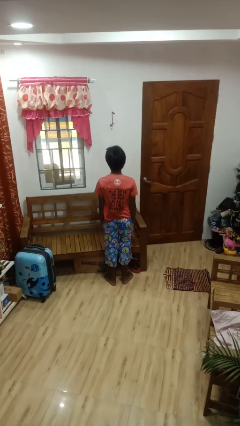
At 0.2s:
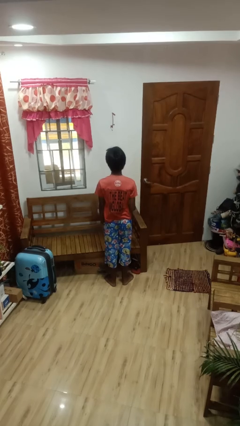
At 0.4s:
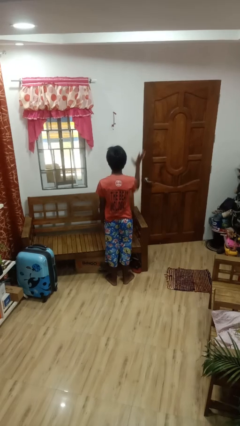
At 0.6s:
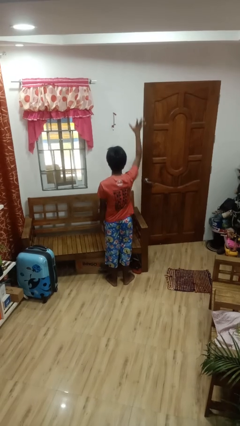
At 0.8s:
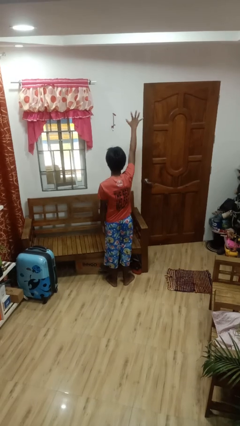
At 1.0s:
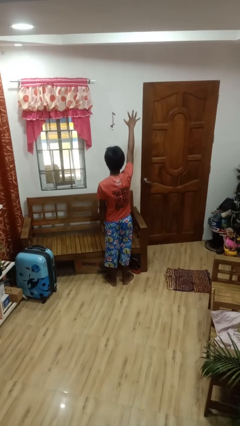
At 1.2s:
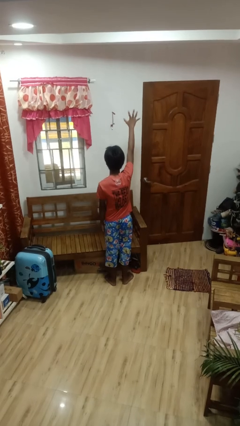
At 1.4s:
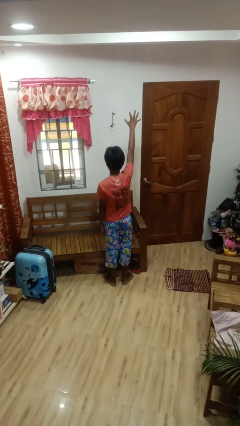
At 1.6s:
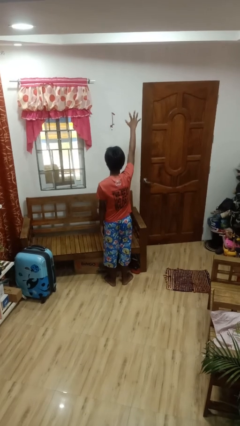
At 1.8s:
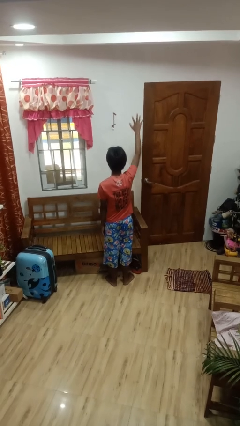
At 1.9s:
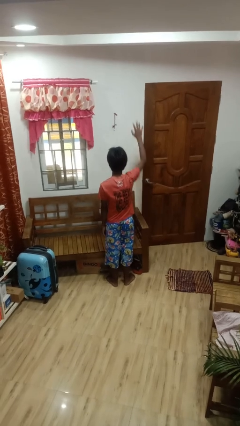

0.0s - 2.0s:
person gestures number five

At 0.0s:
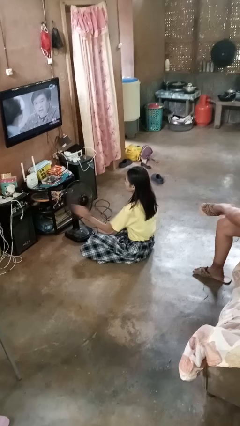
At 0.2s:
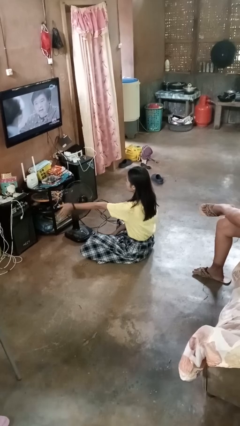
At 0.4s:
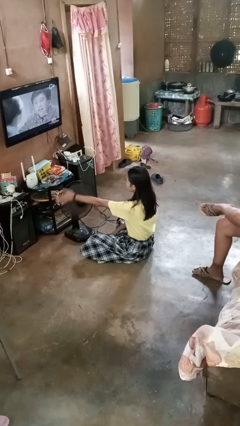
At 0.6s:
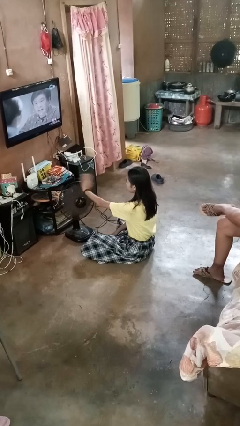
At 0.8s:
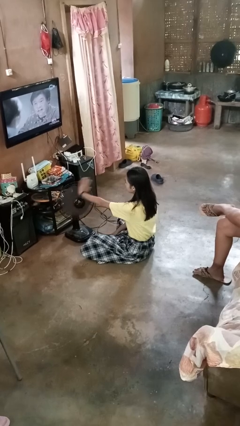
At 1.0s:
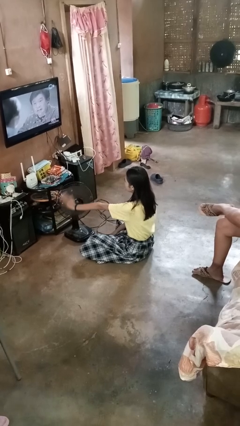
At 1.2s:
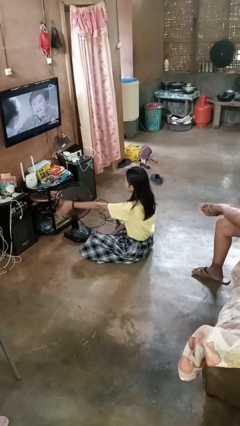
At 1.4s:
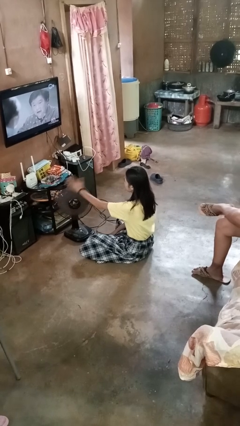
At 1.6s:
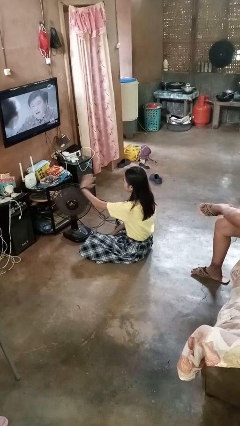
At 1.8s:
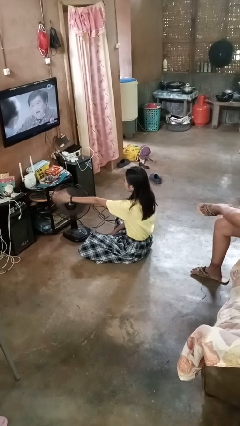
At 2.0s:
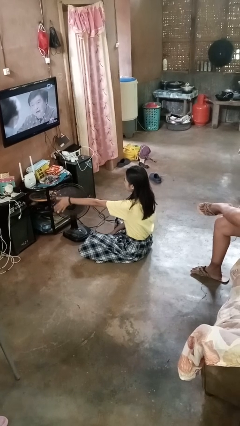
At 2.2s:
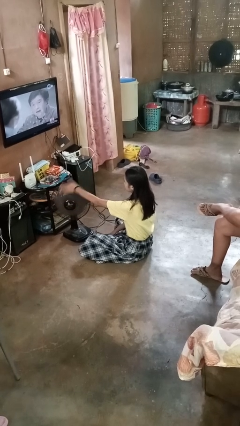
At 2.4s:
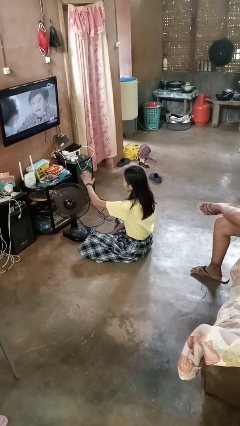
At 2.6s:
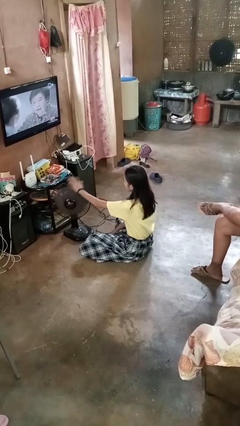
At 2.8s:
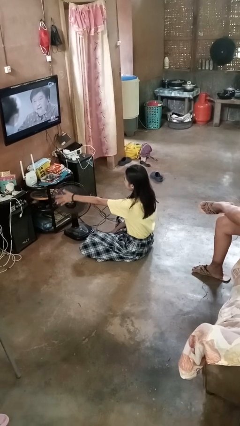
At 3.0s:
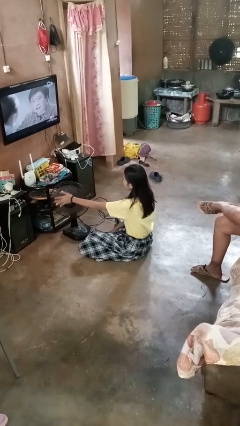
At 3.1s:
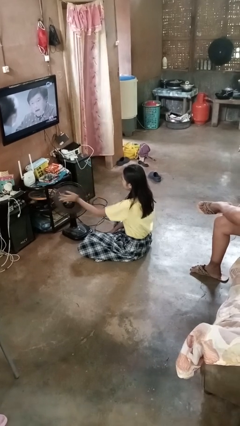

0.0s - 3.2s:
person waves hand over object

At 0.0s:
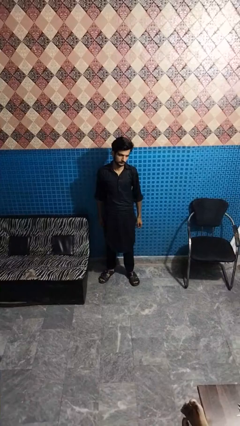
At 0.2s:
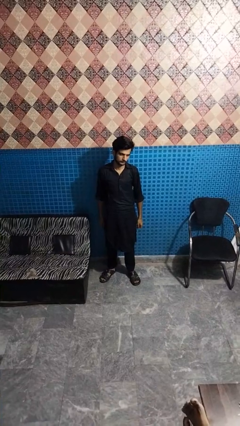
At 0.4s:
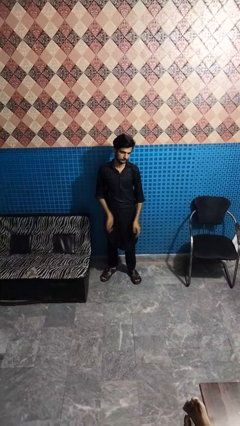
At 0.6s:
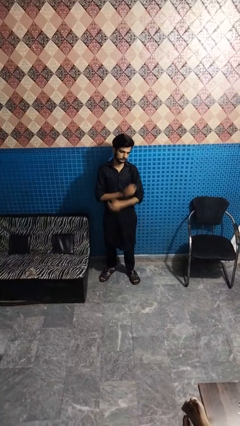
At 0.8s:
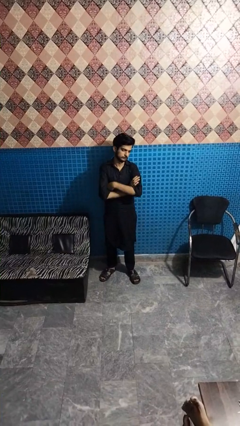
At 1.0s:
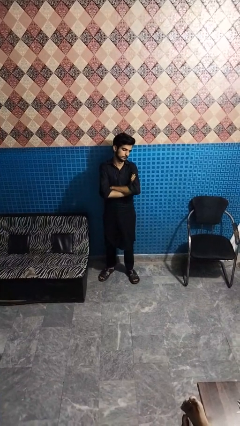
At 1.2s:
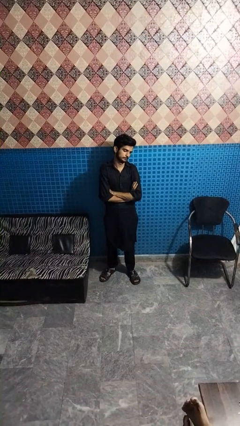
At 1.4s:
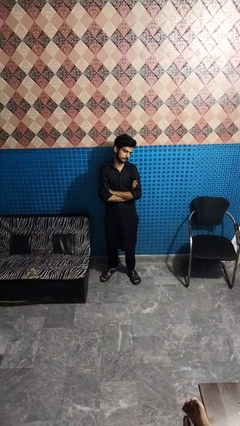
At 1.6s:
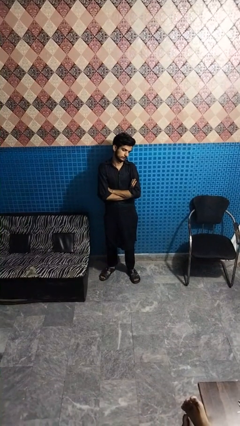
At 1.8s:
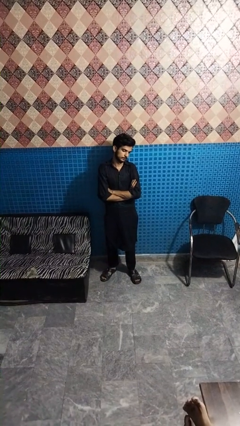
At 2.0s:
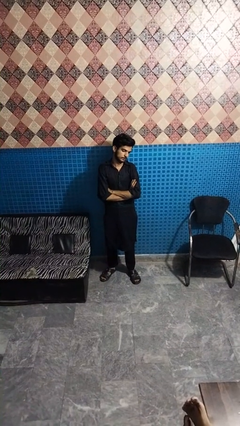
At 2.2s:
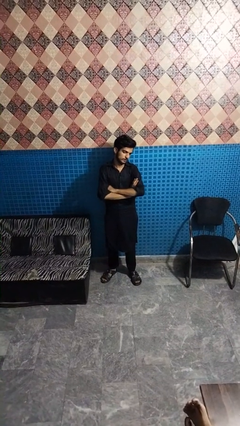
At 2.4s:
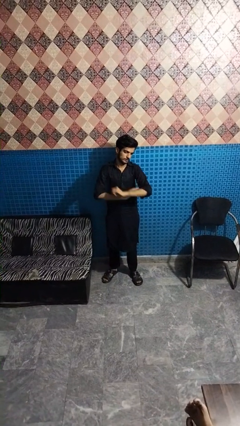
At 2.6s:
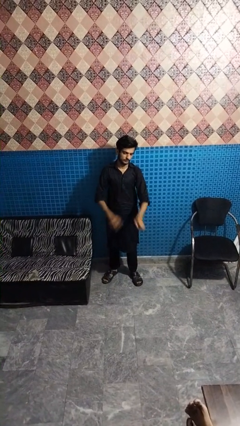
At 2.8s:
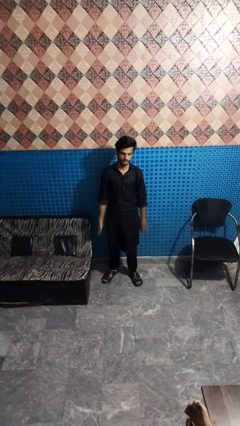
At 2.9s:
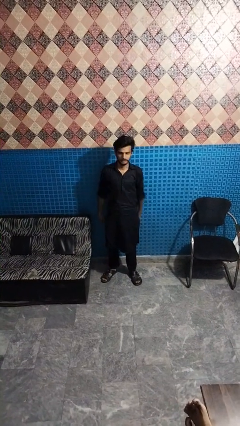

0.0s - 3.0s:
person crosses arms

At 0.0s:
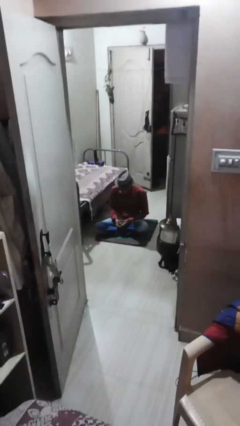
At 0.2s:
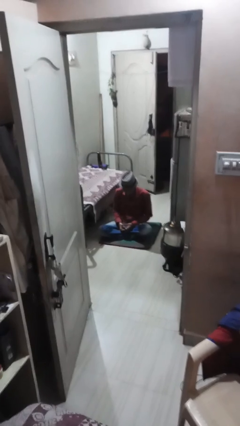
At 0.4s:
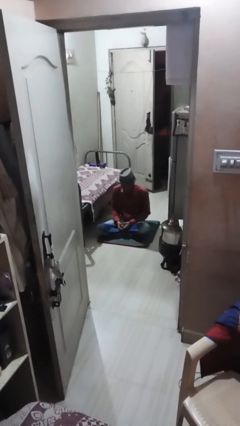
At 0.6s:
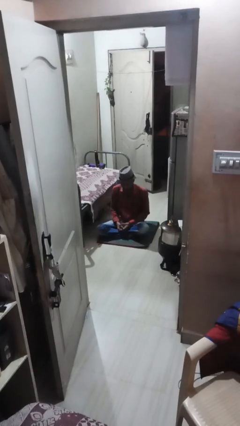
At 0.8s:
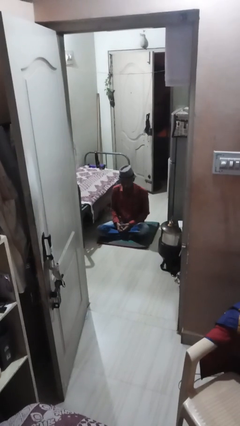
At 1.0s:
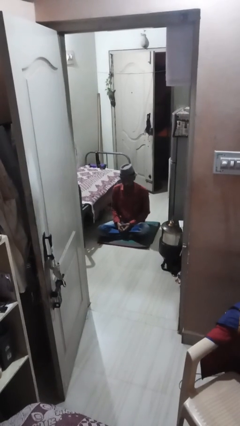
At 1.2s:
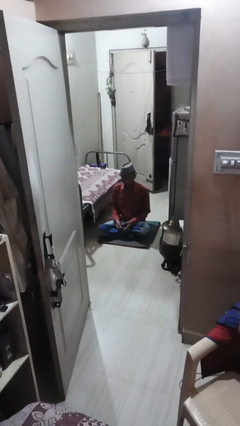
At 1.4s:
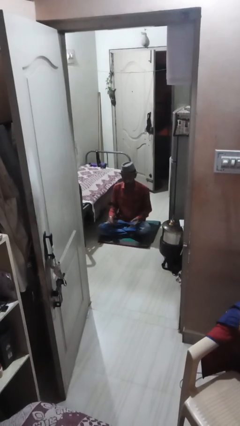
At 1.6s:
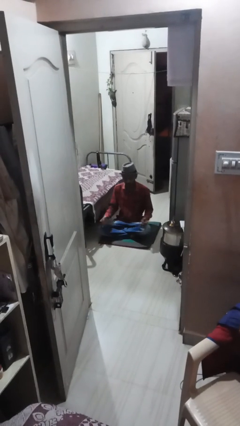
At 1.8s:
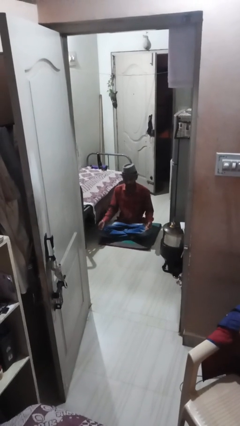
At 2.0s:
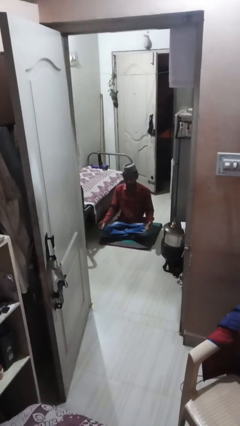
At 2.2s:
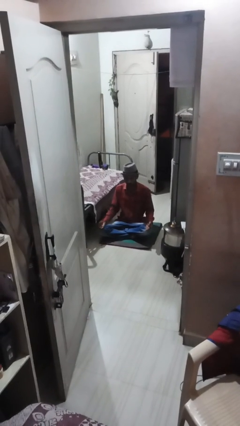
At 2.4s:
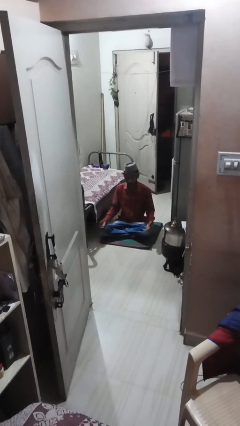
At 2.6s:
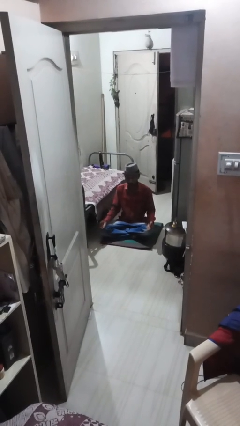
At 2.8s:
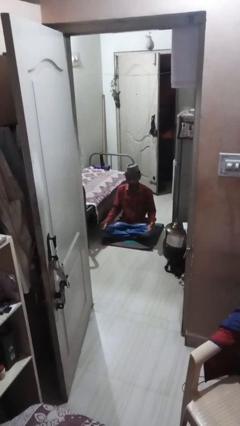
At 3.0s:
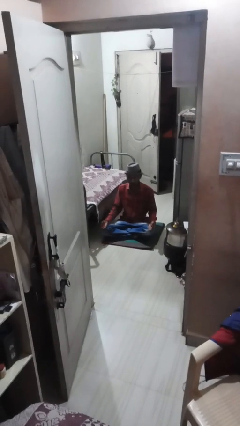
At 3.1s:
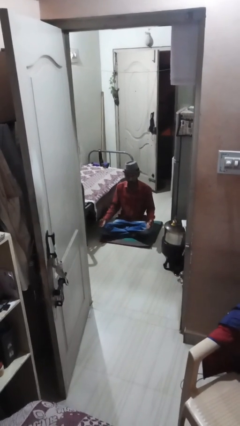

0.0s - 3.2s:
person prays

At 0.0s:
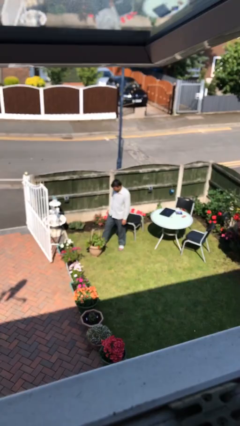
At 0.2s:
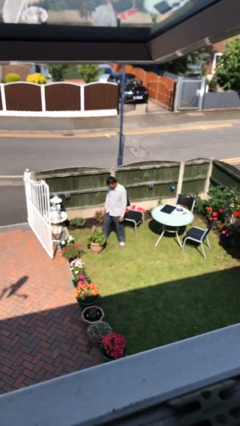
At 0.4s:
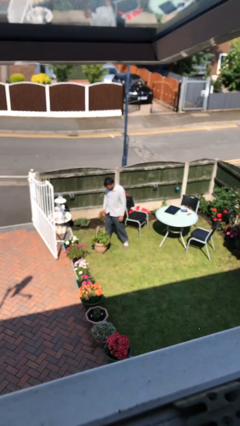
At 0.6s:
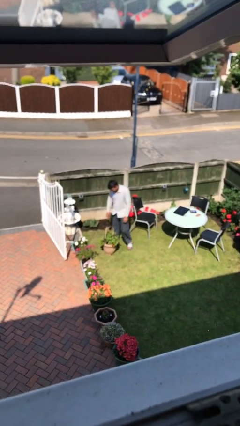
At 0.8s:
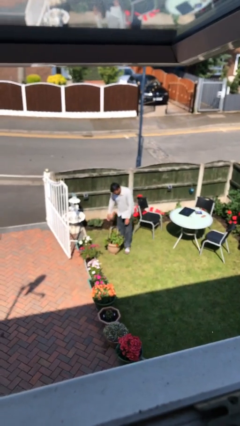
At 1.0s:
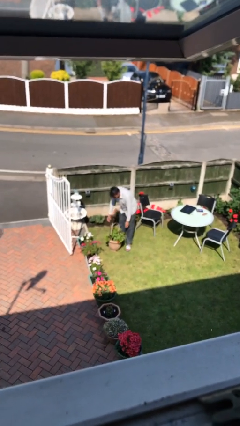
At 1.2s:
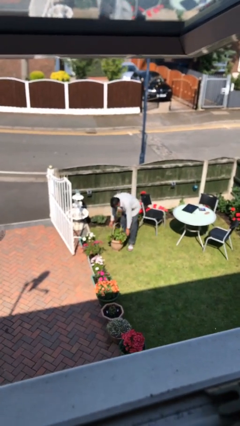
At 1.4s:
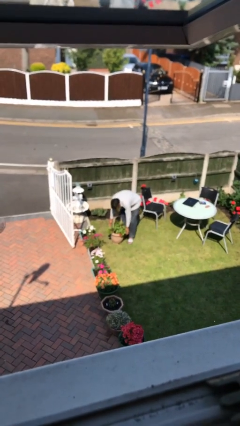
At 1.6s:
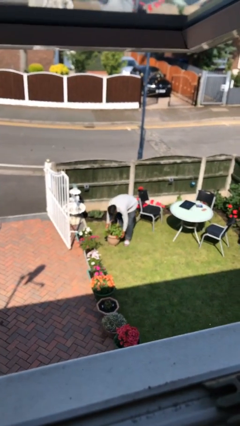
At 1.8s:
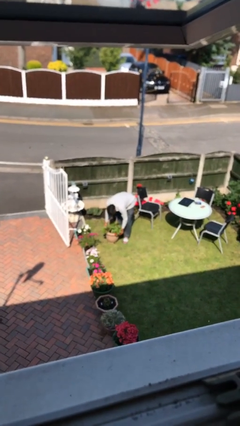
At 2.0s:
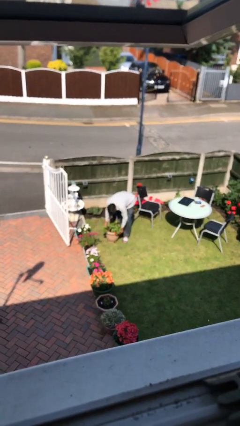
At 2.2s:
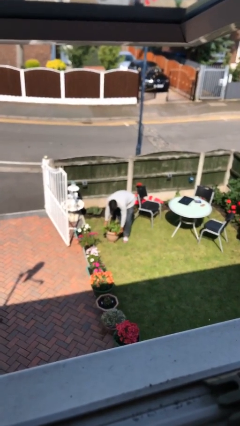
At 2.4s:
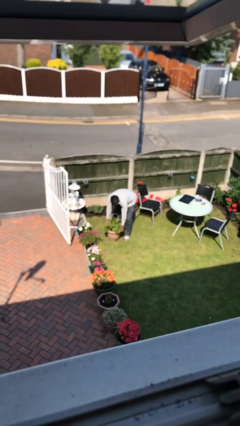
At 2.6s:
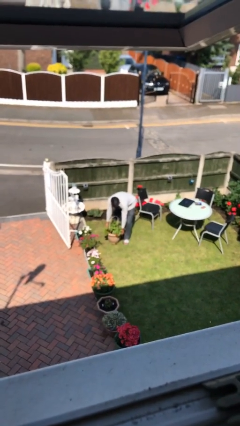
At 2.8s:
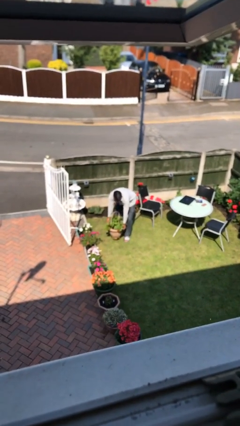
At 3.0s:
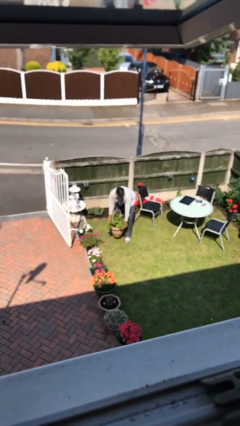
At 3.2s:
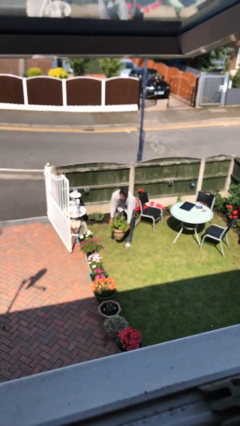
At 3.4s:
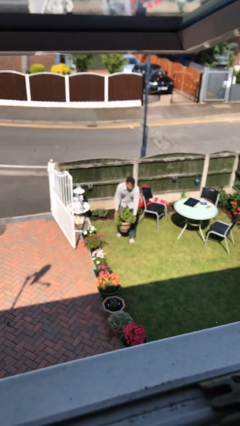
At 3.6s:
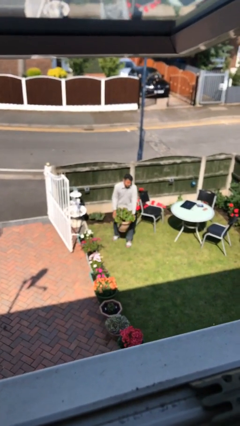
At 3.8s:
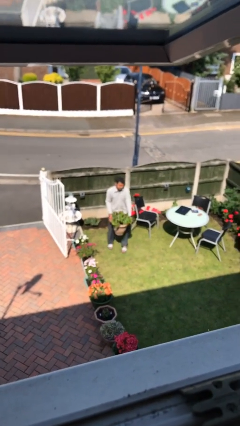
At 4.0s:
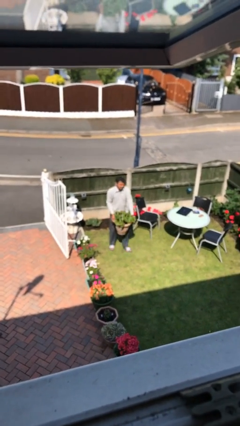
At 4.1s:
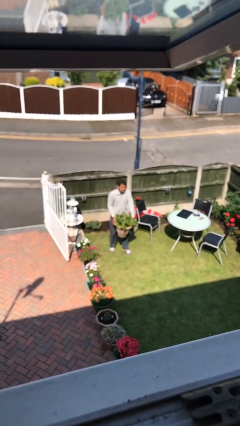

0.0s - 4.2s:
person picks up object from floor

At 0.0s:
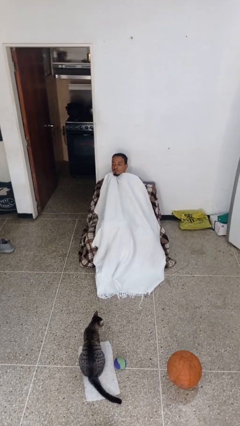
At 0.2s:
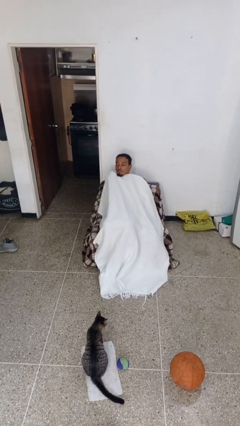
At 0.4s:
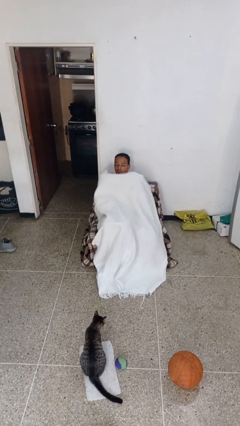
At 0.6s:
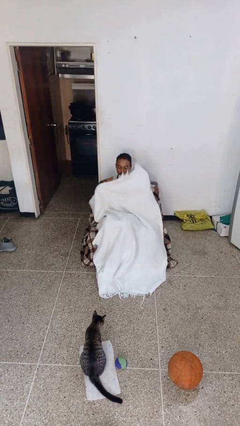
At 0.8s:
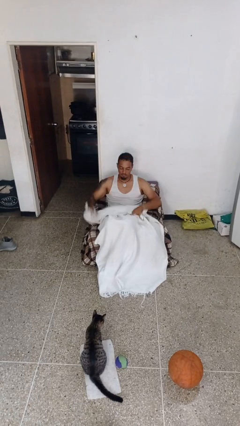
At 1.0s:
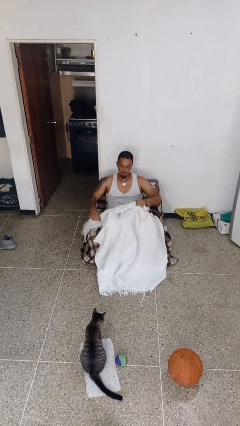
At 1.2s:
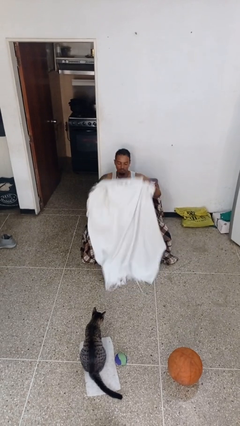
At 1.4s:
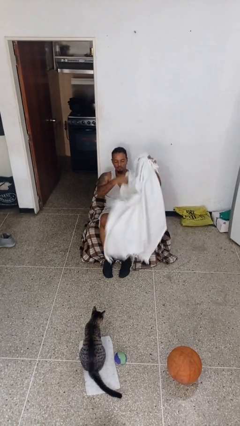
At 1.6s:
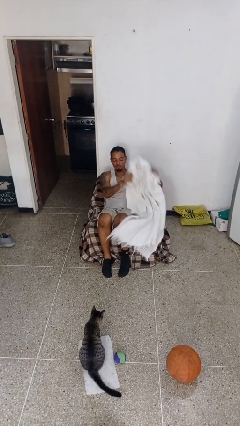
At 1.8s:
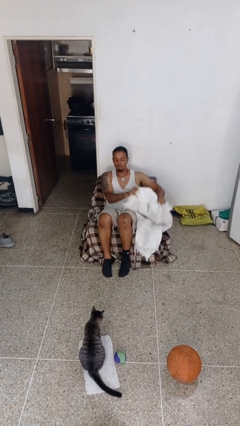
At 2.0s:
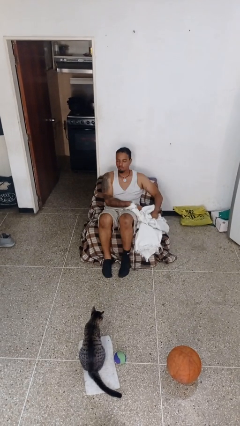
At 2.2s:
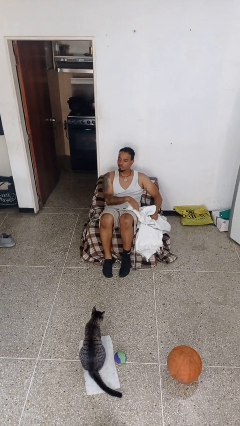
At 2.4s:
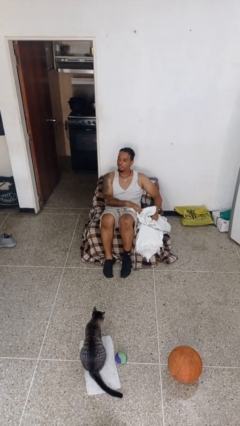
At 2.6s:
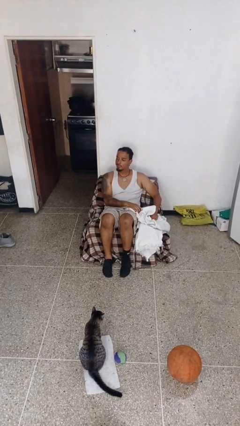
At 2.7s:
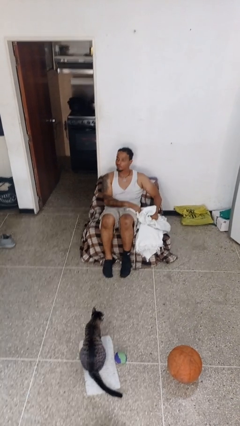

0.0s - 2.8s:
person uncovers with blanket
